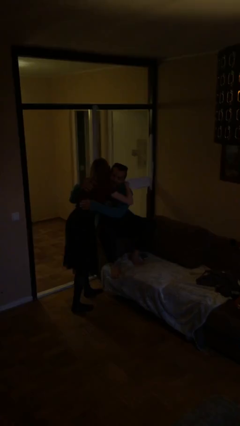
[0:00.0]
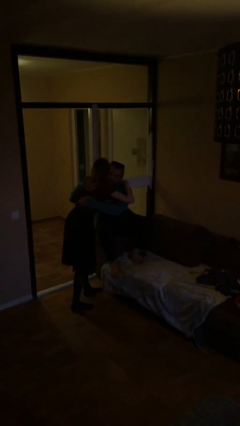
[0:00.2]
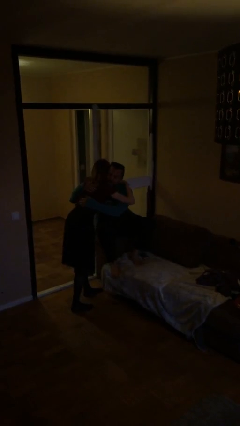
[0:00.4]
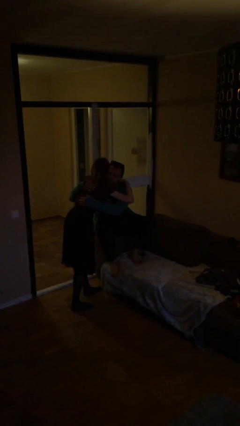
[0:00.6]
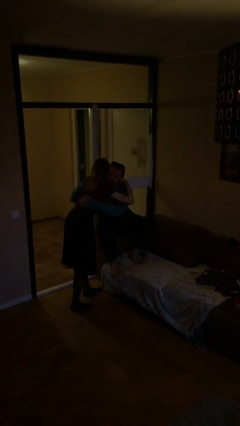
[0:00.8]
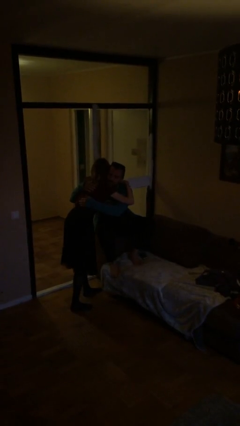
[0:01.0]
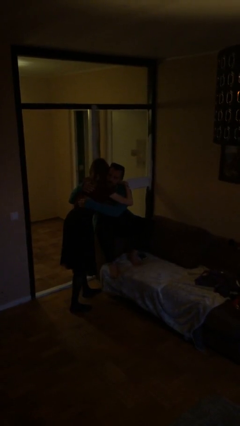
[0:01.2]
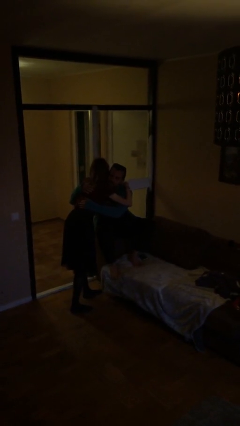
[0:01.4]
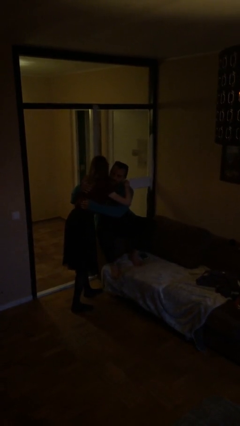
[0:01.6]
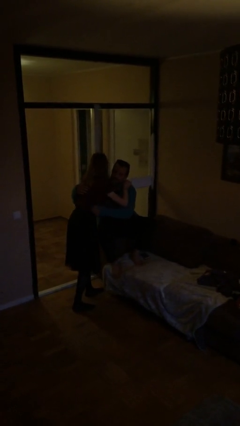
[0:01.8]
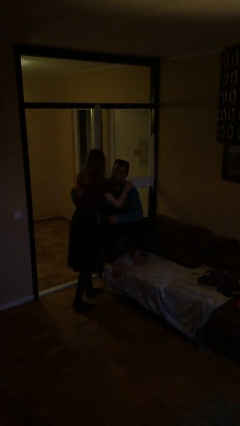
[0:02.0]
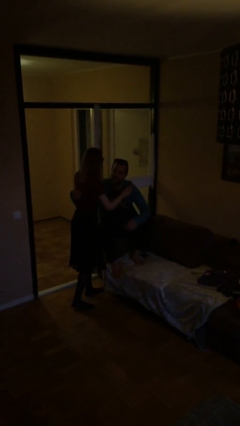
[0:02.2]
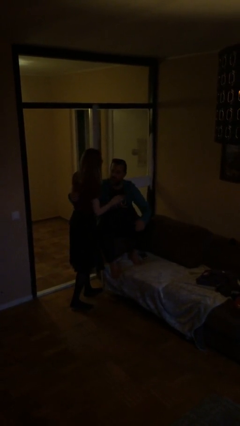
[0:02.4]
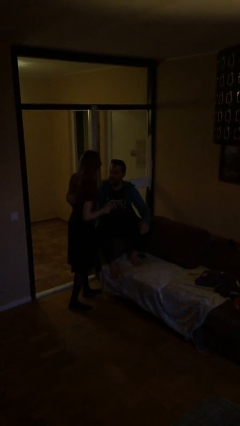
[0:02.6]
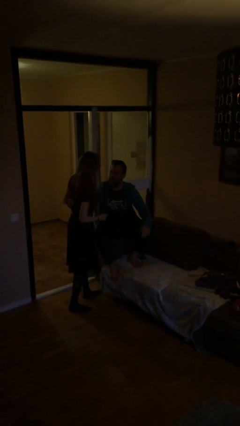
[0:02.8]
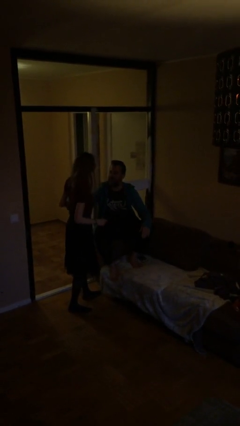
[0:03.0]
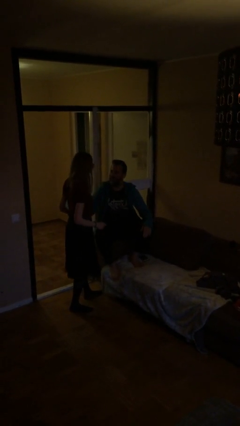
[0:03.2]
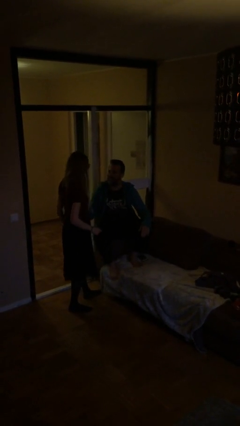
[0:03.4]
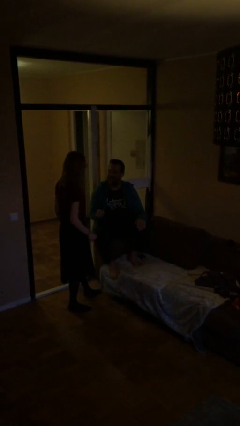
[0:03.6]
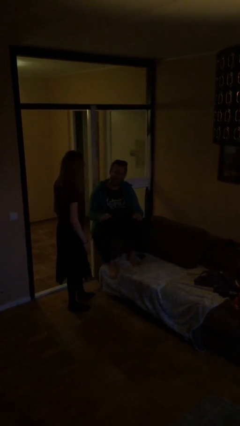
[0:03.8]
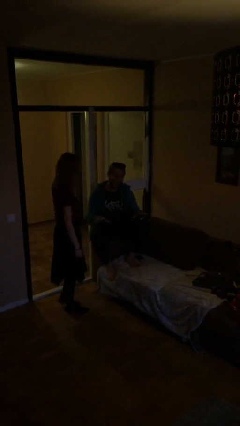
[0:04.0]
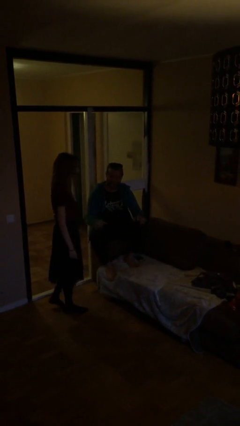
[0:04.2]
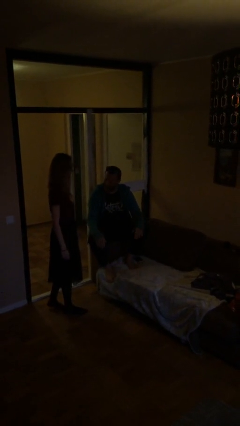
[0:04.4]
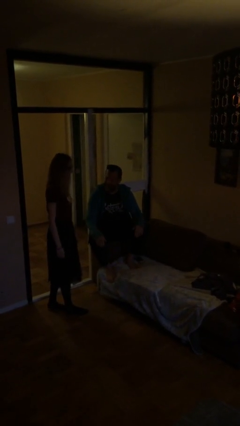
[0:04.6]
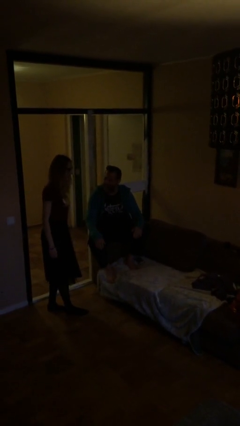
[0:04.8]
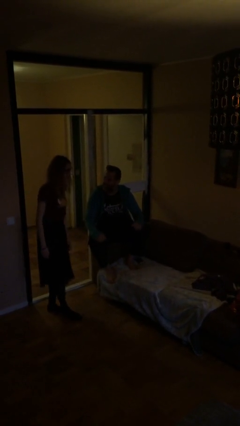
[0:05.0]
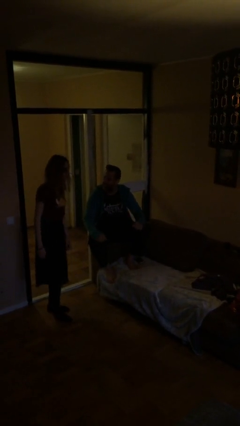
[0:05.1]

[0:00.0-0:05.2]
person embraces person

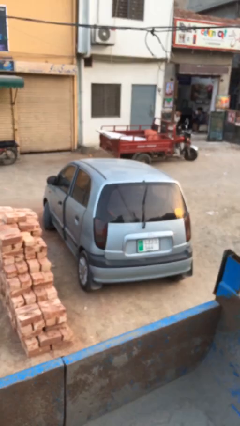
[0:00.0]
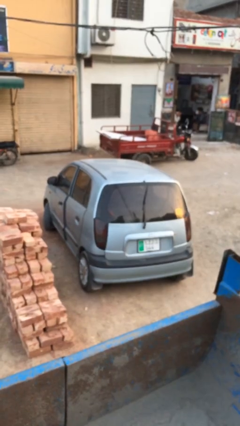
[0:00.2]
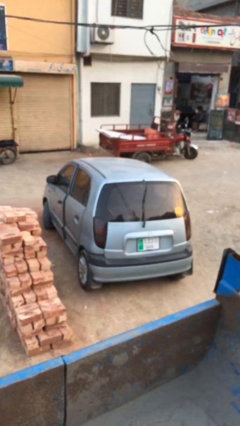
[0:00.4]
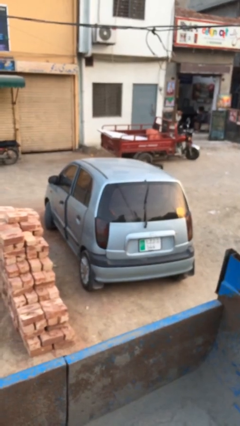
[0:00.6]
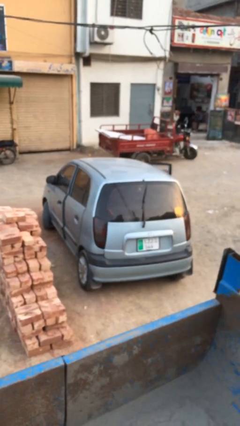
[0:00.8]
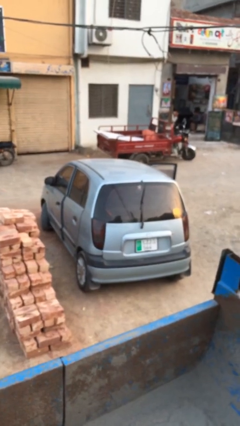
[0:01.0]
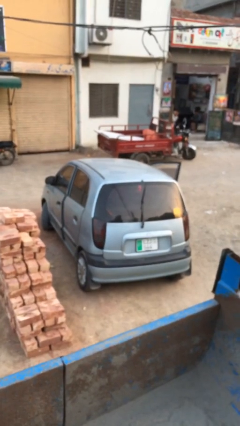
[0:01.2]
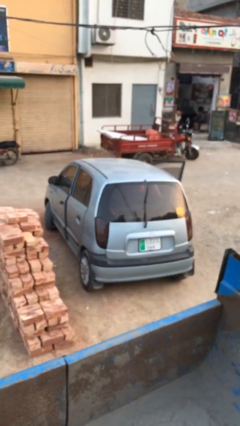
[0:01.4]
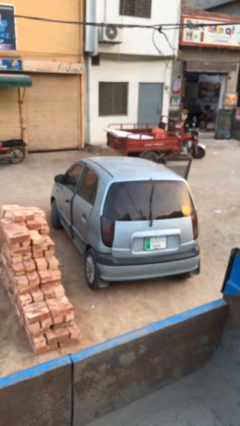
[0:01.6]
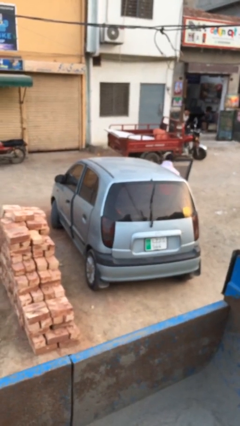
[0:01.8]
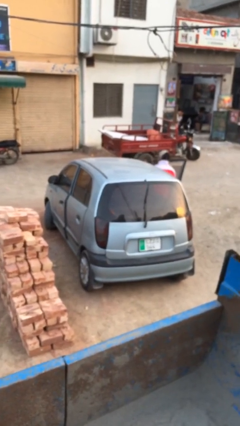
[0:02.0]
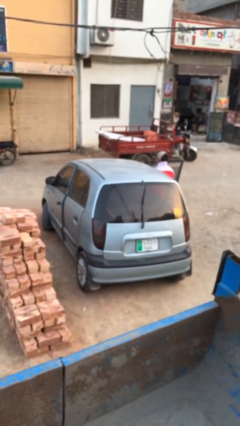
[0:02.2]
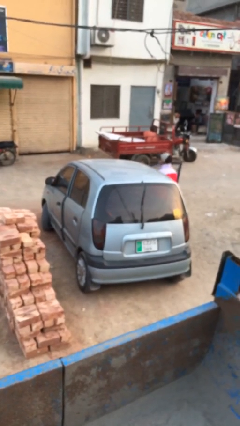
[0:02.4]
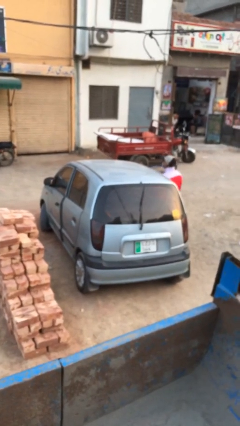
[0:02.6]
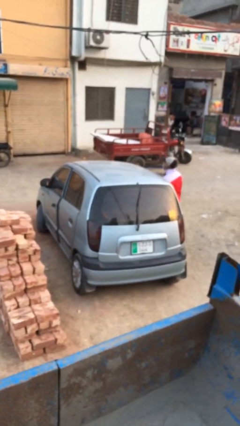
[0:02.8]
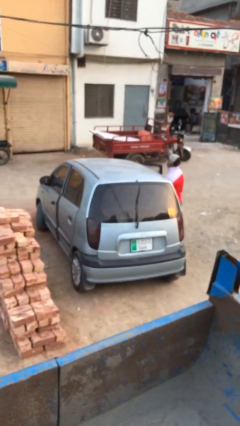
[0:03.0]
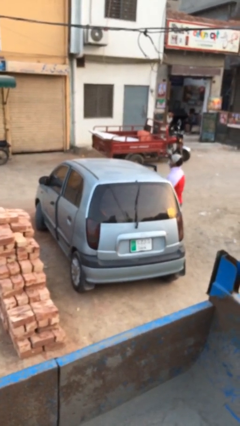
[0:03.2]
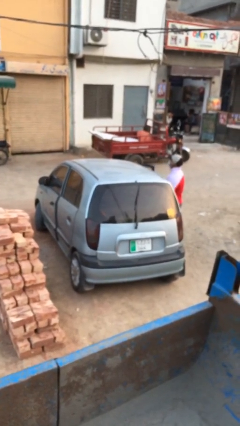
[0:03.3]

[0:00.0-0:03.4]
car drops off person

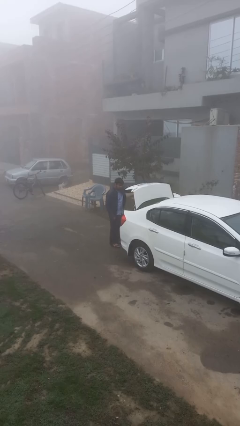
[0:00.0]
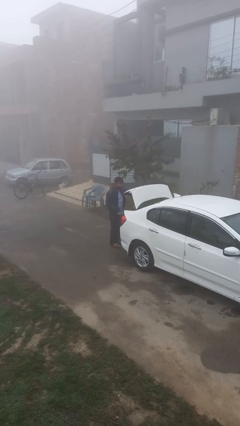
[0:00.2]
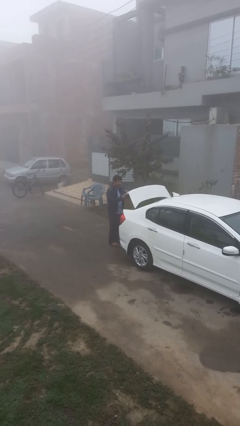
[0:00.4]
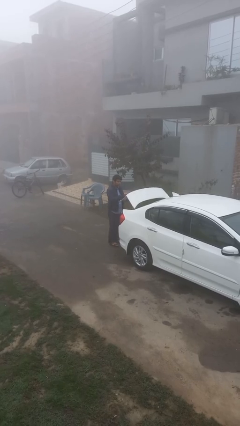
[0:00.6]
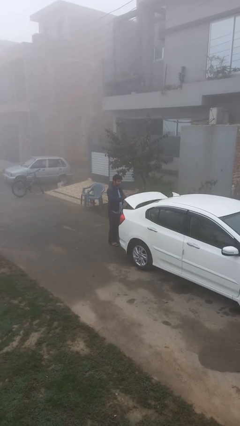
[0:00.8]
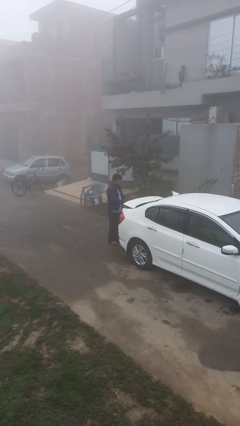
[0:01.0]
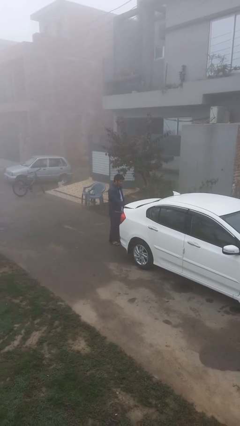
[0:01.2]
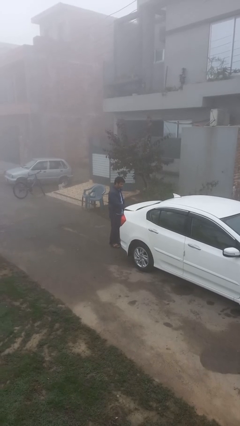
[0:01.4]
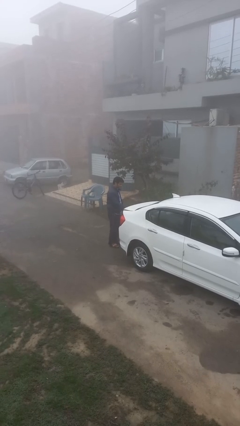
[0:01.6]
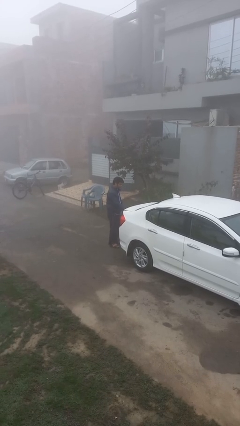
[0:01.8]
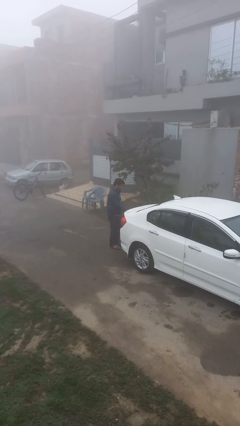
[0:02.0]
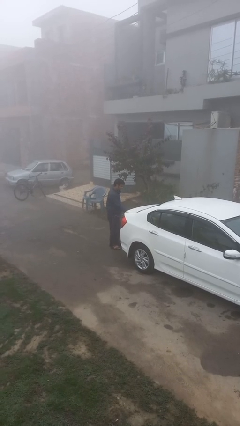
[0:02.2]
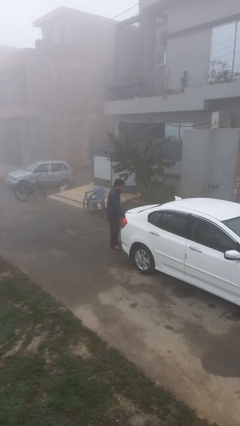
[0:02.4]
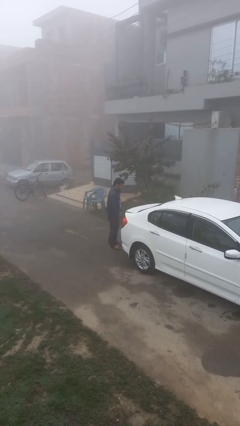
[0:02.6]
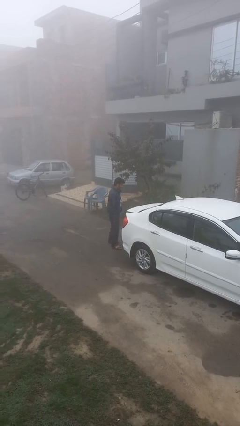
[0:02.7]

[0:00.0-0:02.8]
person closes car trunk

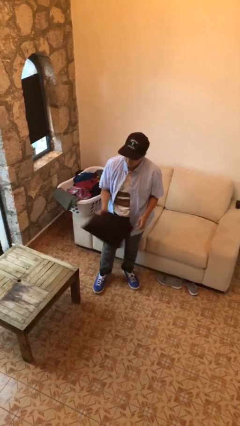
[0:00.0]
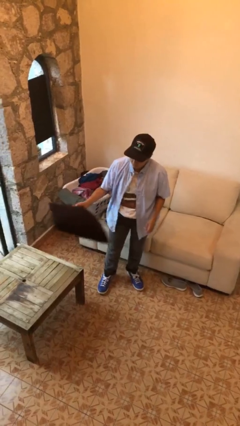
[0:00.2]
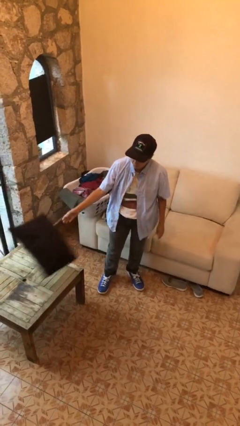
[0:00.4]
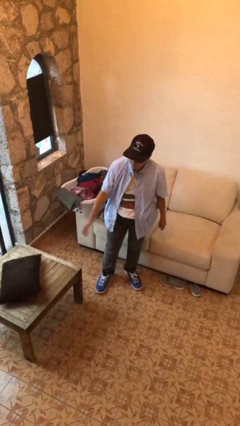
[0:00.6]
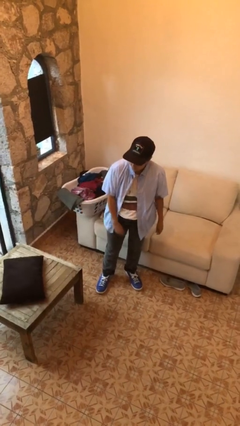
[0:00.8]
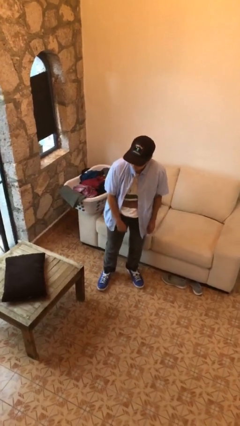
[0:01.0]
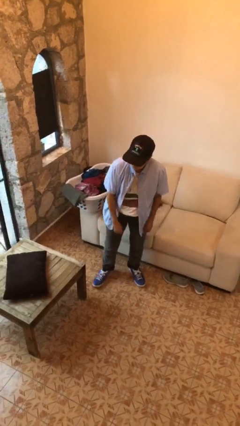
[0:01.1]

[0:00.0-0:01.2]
person throws object on table

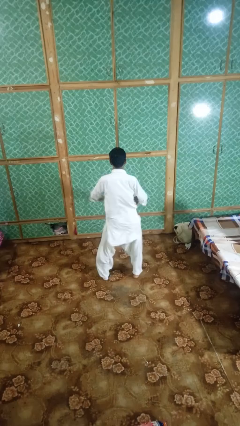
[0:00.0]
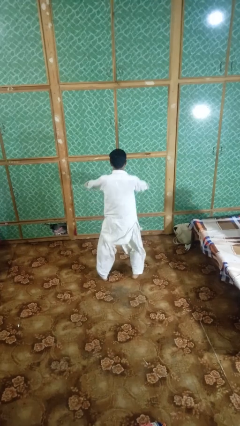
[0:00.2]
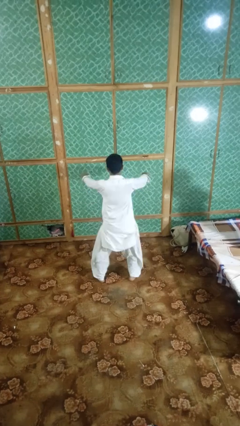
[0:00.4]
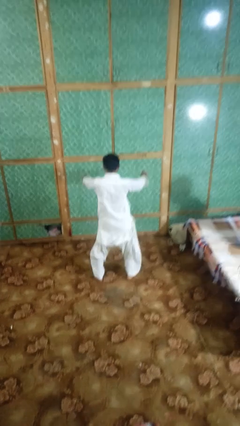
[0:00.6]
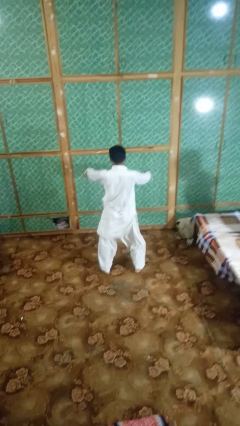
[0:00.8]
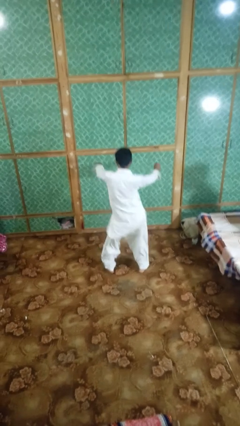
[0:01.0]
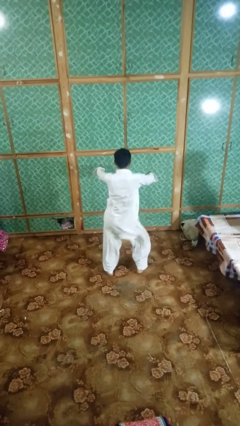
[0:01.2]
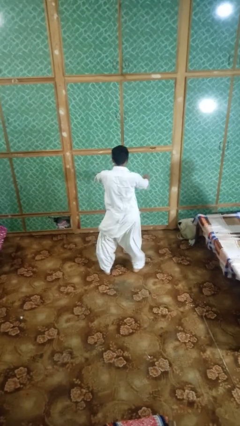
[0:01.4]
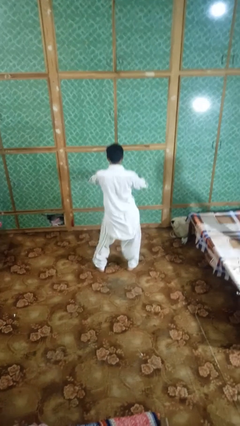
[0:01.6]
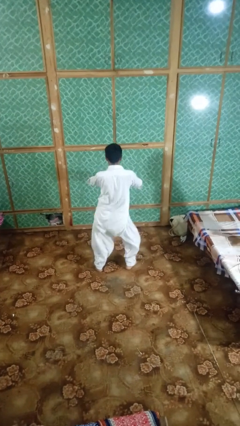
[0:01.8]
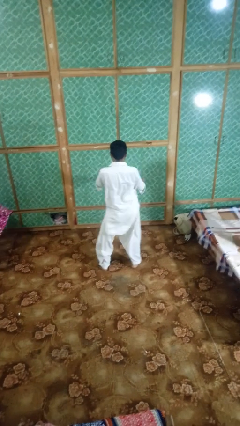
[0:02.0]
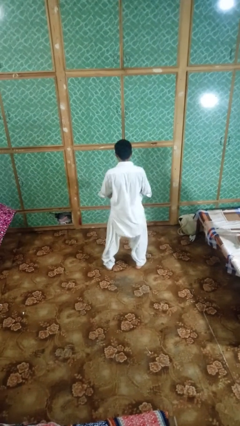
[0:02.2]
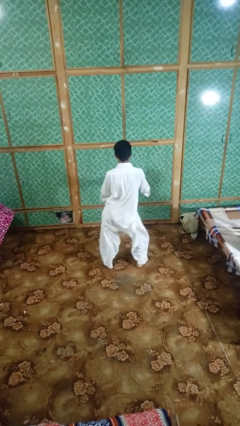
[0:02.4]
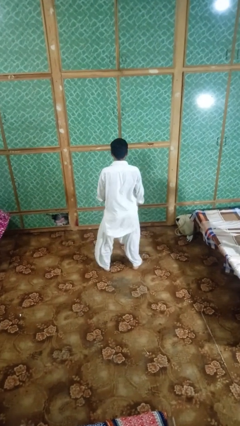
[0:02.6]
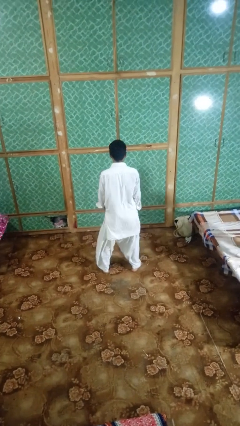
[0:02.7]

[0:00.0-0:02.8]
person dances in place

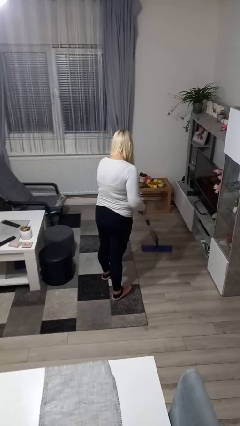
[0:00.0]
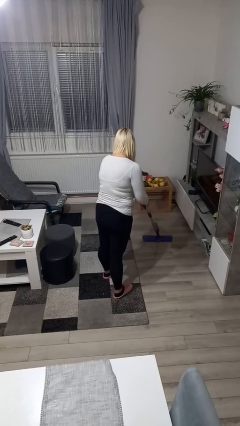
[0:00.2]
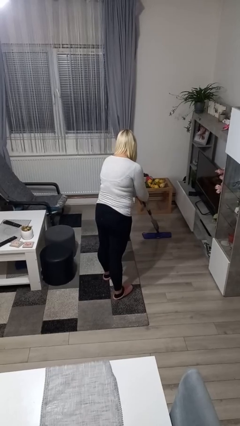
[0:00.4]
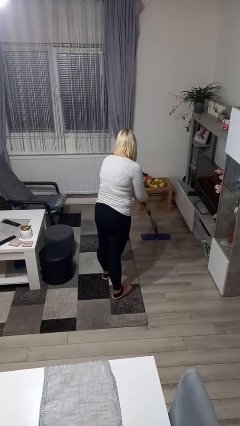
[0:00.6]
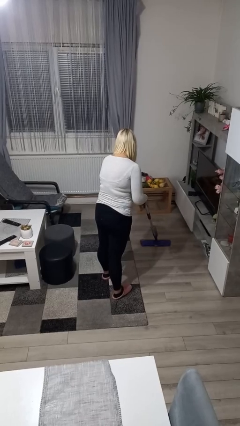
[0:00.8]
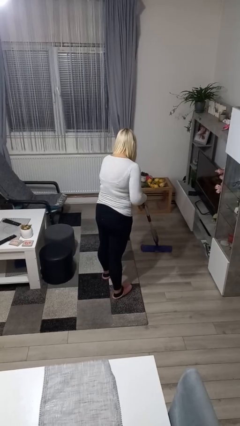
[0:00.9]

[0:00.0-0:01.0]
person mops

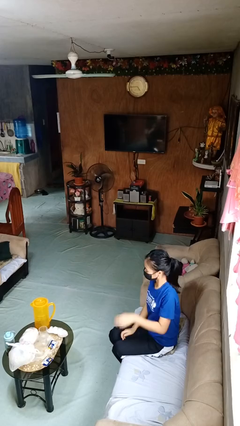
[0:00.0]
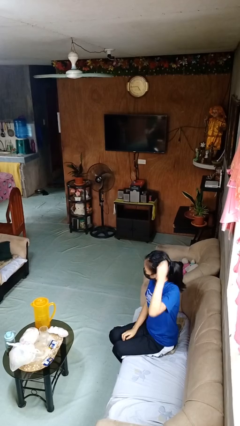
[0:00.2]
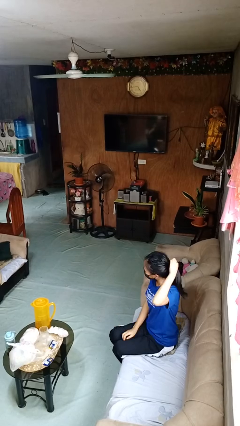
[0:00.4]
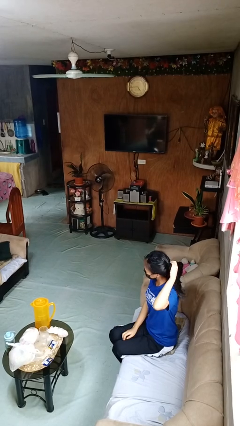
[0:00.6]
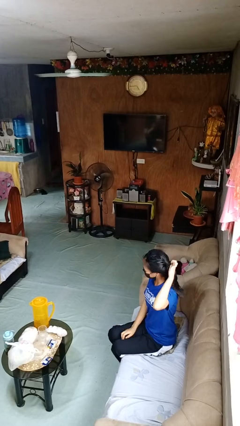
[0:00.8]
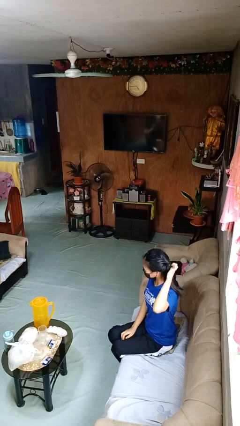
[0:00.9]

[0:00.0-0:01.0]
person takes off hairtie

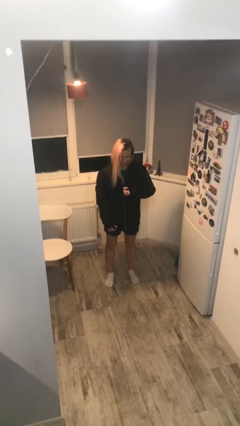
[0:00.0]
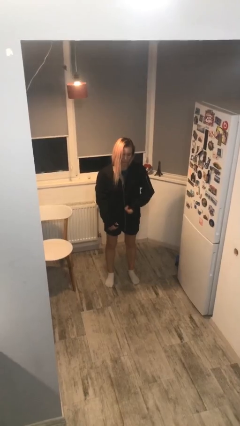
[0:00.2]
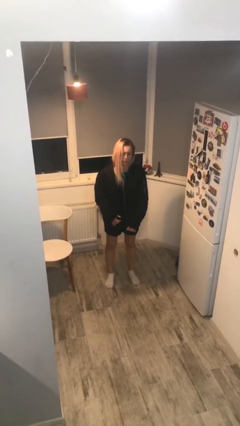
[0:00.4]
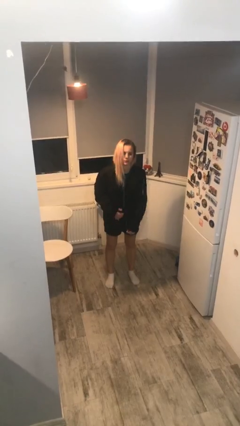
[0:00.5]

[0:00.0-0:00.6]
person unzips jacket
